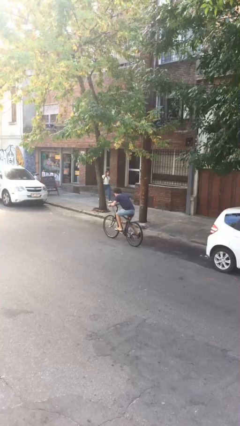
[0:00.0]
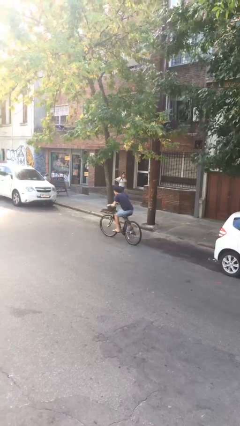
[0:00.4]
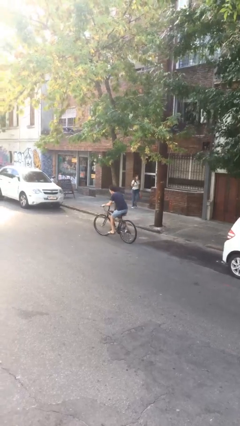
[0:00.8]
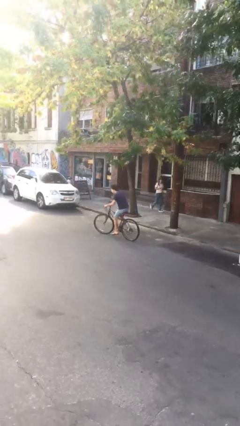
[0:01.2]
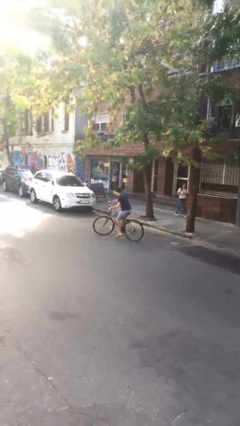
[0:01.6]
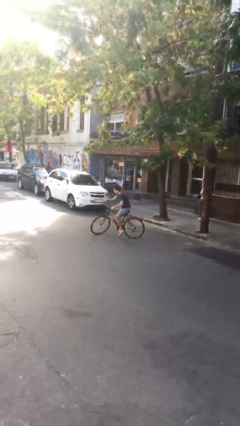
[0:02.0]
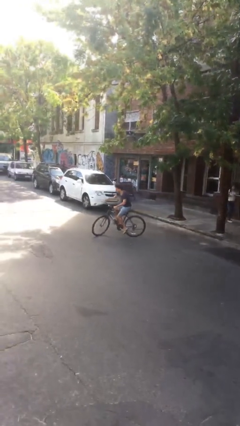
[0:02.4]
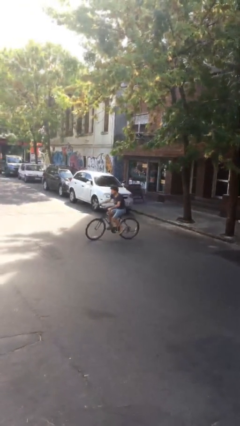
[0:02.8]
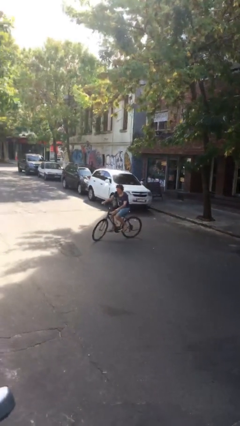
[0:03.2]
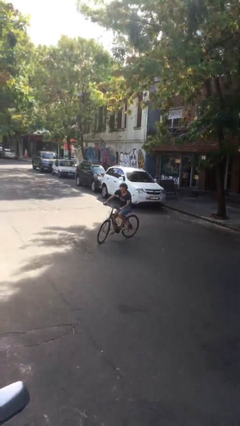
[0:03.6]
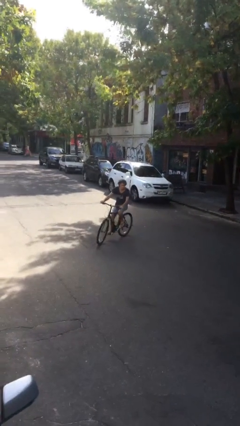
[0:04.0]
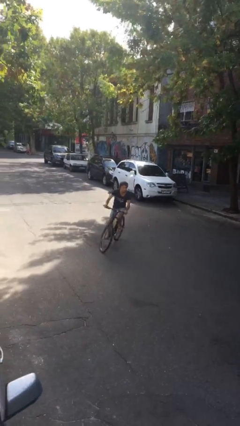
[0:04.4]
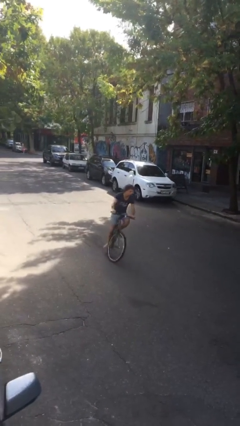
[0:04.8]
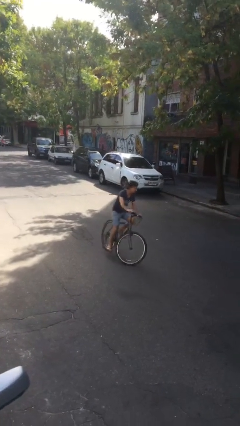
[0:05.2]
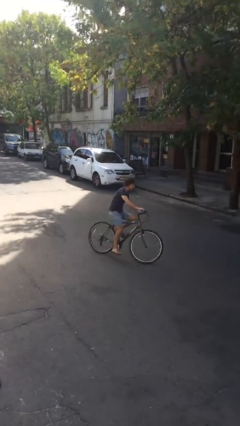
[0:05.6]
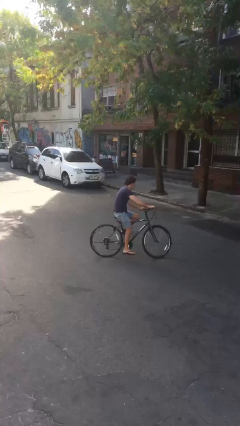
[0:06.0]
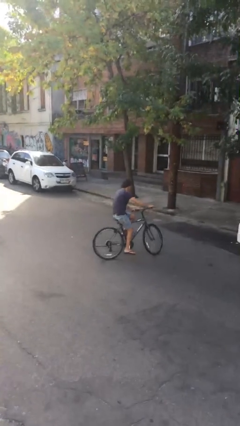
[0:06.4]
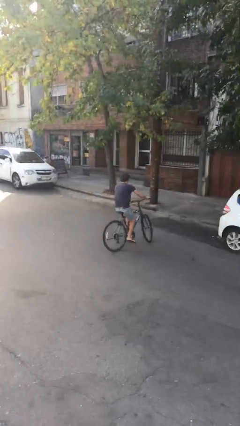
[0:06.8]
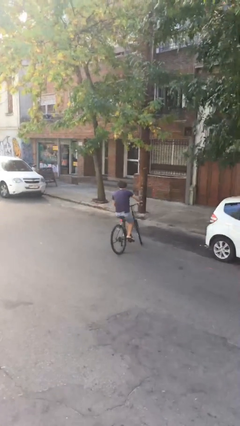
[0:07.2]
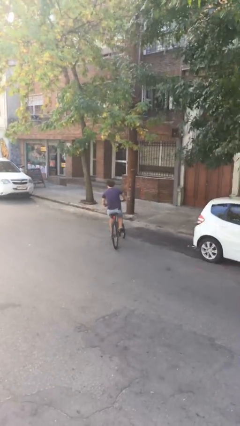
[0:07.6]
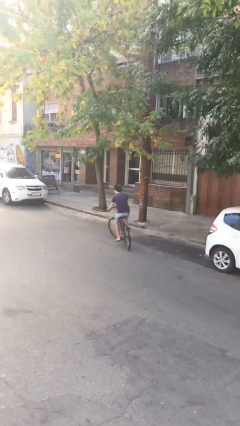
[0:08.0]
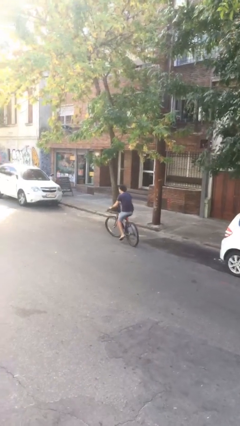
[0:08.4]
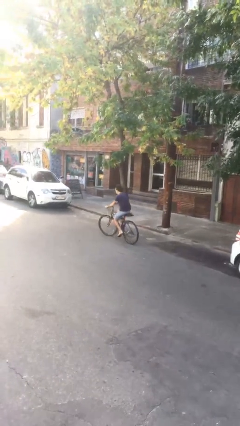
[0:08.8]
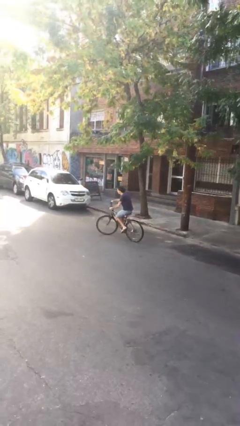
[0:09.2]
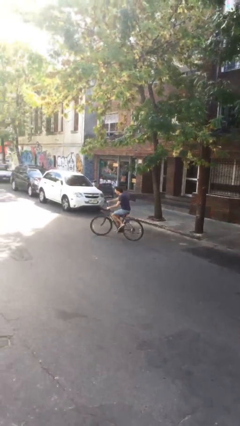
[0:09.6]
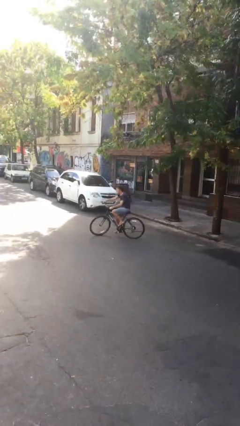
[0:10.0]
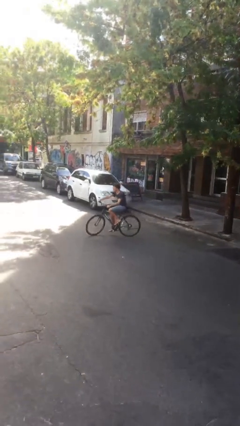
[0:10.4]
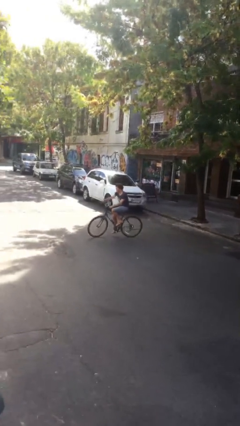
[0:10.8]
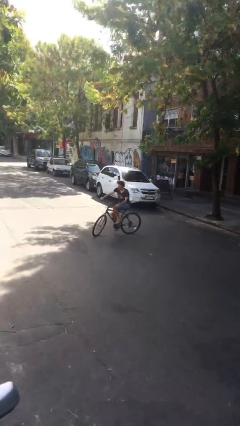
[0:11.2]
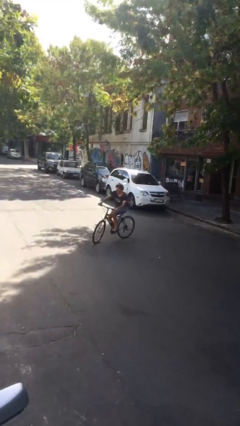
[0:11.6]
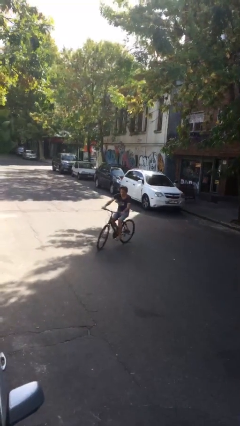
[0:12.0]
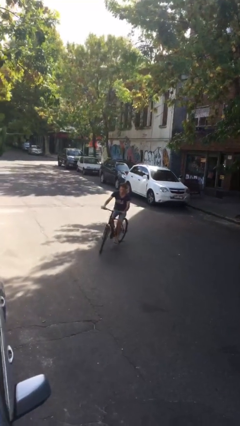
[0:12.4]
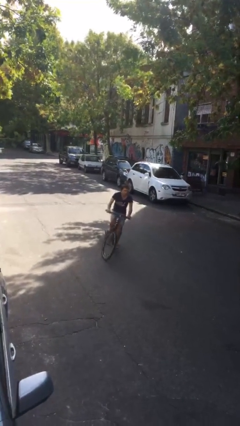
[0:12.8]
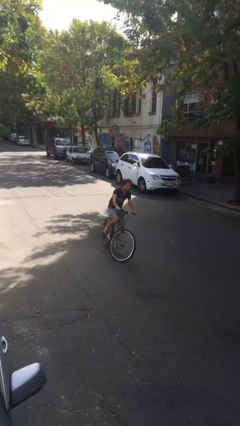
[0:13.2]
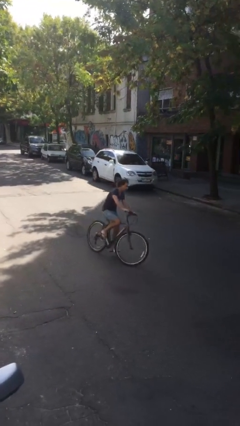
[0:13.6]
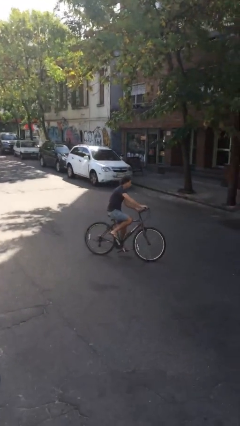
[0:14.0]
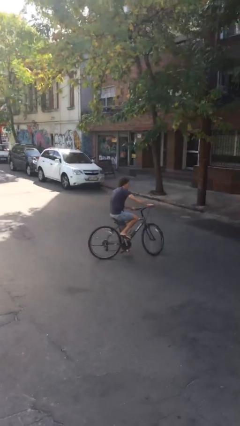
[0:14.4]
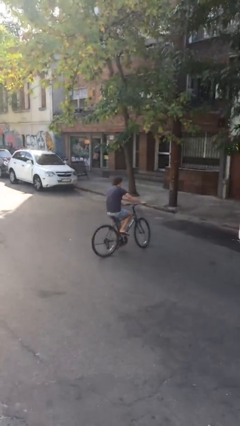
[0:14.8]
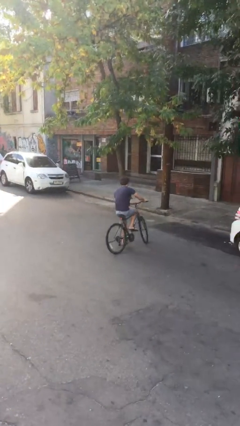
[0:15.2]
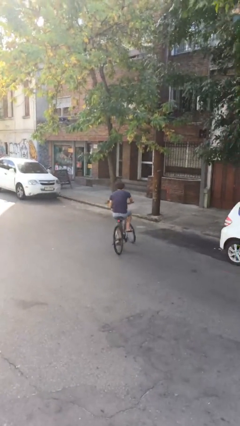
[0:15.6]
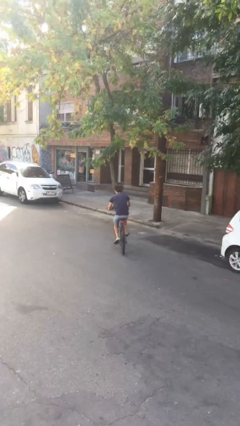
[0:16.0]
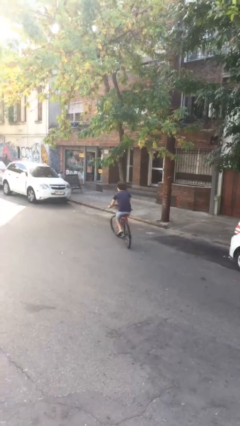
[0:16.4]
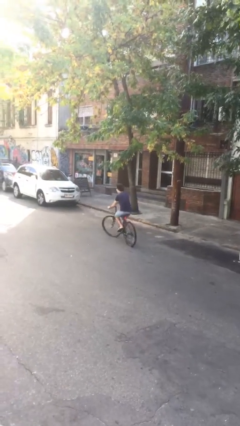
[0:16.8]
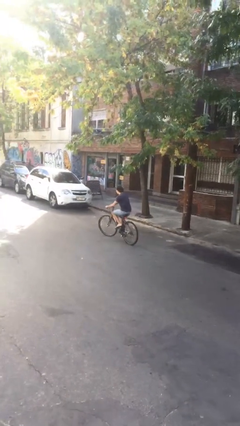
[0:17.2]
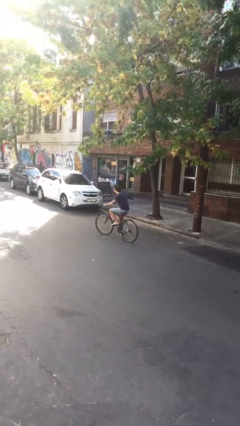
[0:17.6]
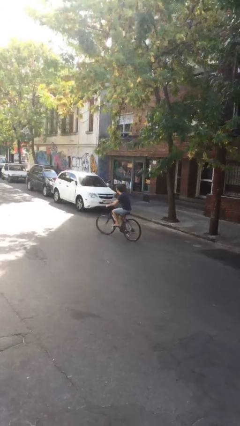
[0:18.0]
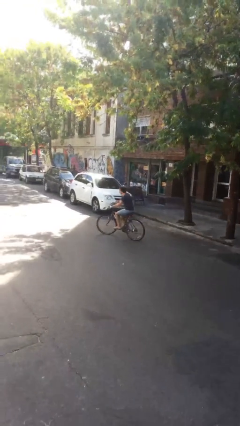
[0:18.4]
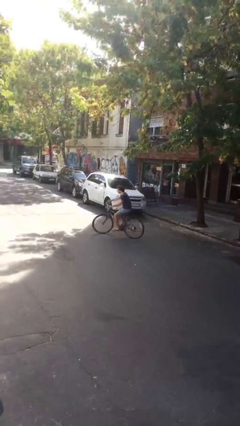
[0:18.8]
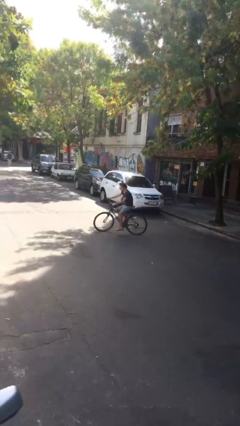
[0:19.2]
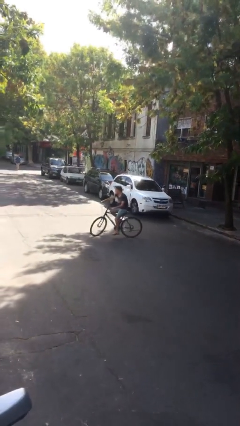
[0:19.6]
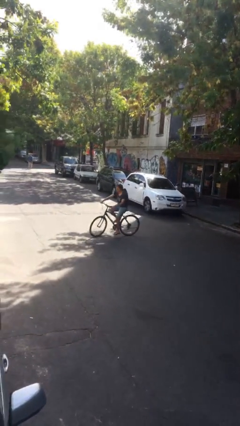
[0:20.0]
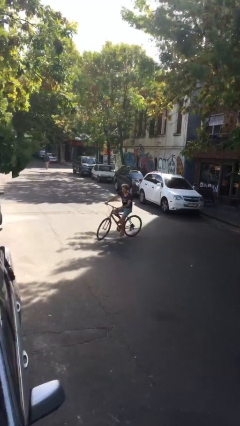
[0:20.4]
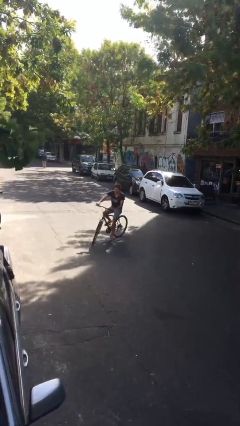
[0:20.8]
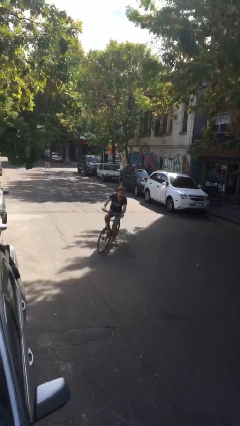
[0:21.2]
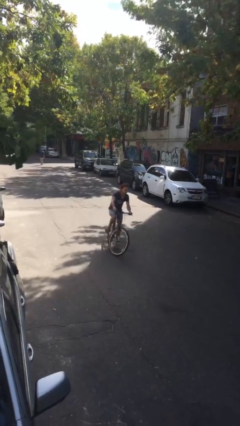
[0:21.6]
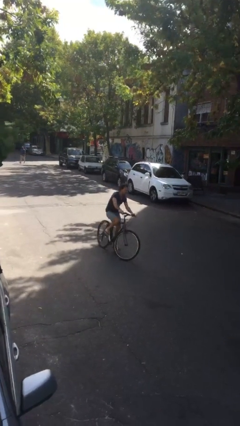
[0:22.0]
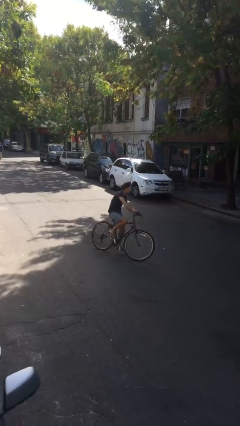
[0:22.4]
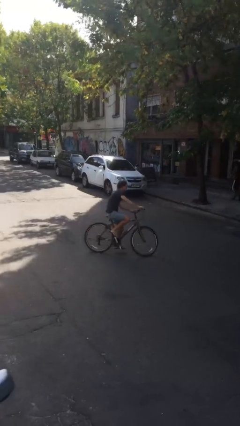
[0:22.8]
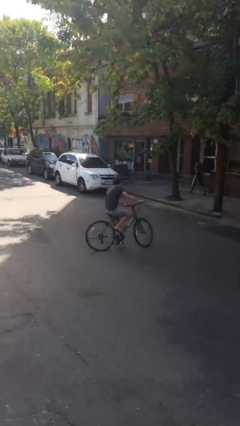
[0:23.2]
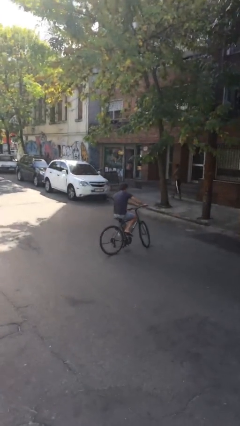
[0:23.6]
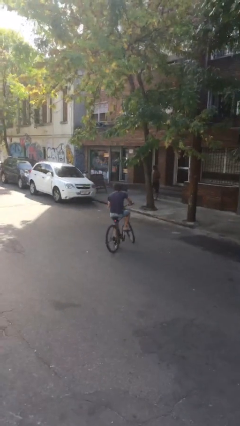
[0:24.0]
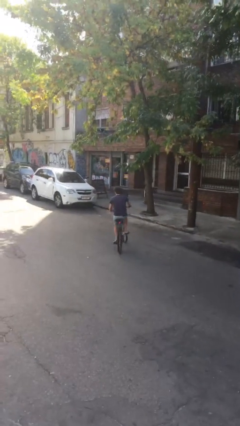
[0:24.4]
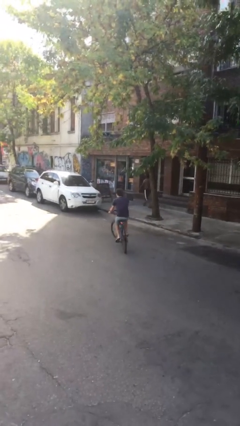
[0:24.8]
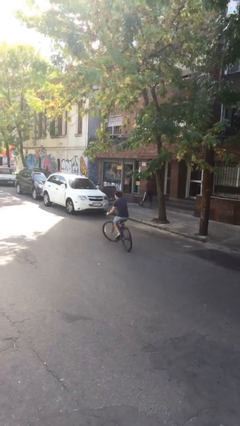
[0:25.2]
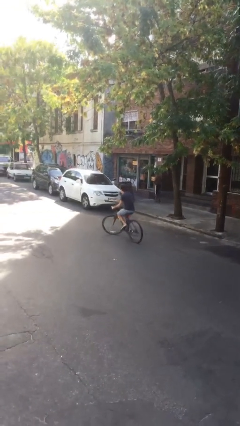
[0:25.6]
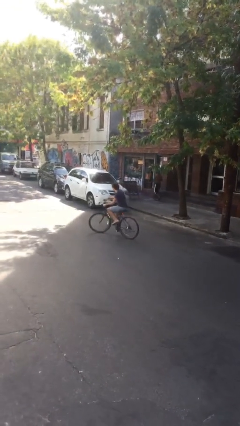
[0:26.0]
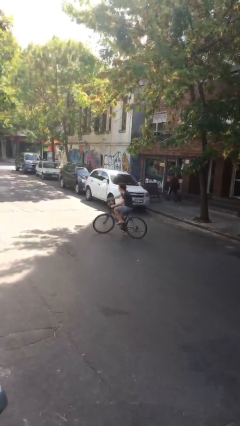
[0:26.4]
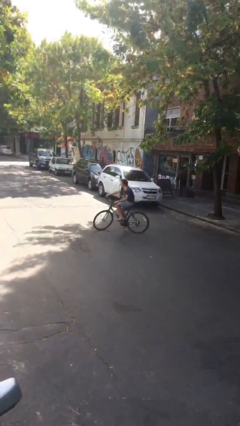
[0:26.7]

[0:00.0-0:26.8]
person rides bicycle

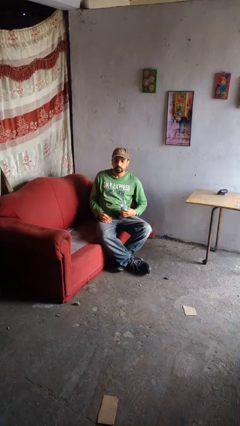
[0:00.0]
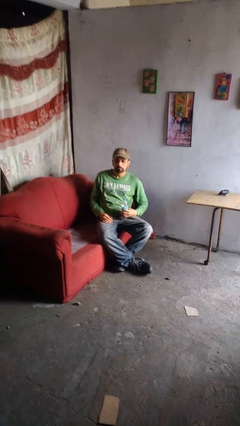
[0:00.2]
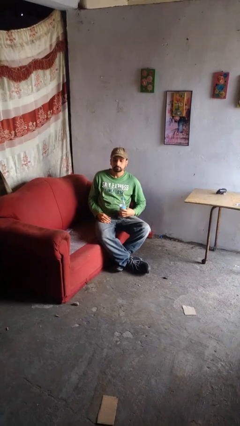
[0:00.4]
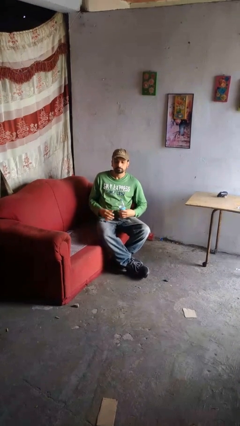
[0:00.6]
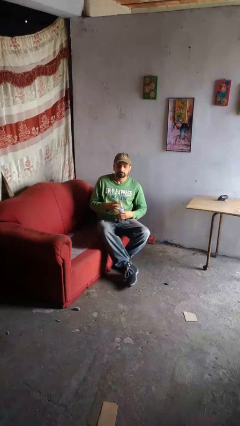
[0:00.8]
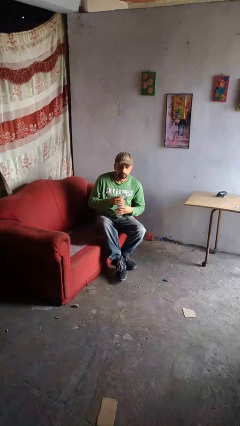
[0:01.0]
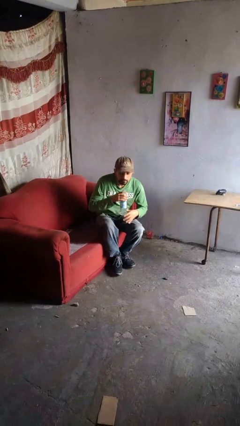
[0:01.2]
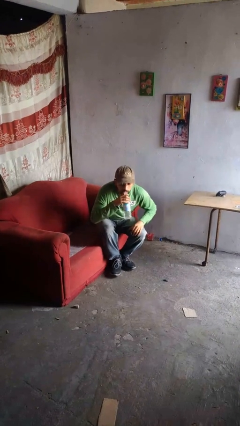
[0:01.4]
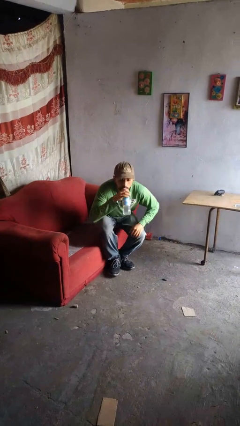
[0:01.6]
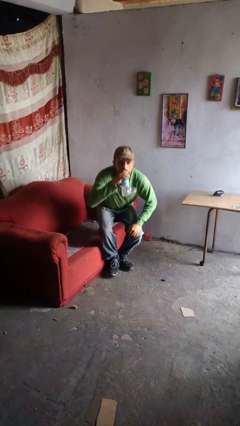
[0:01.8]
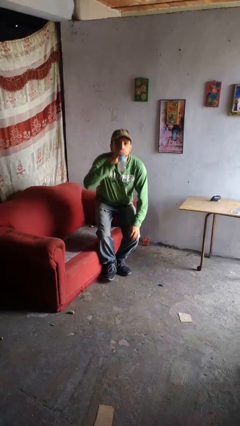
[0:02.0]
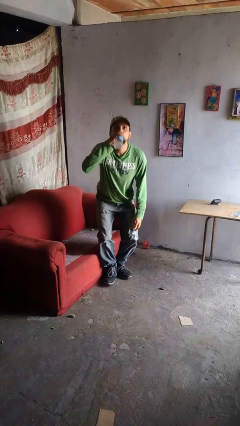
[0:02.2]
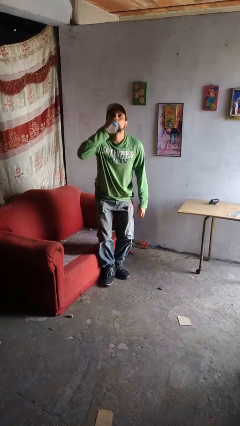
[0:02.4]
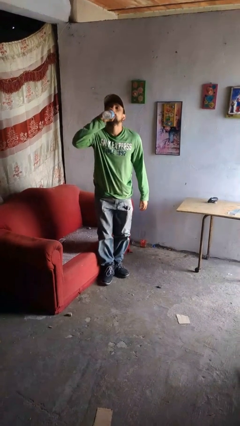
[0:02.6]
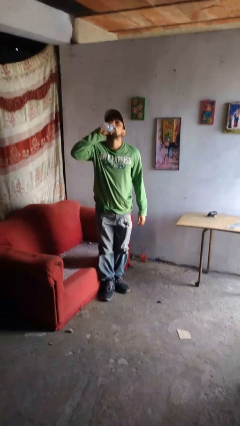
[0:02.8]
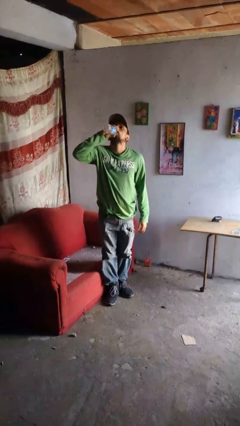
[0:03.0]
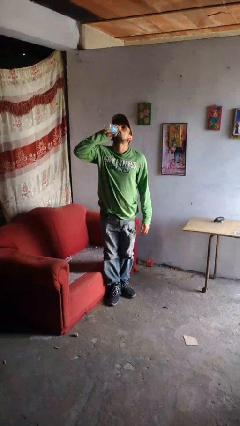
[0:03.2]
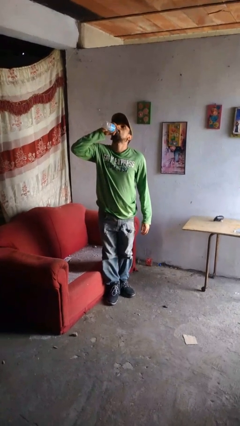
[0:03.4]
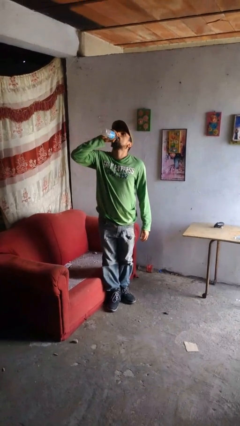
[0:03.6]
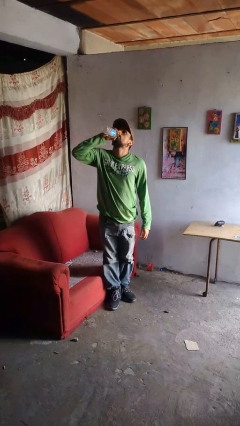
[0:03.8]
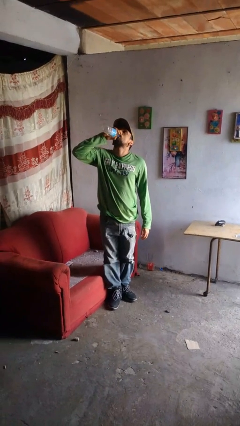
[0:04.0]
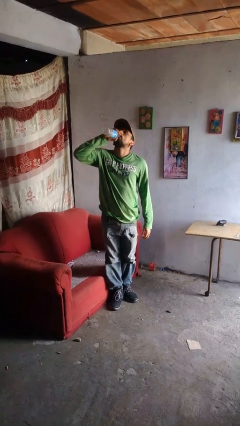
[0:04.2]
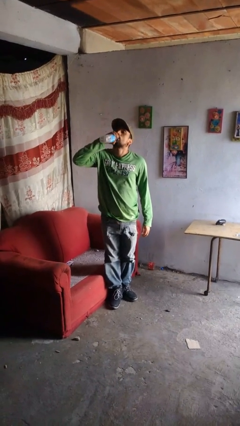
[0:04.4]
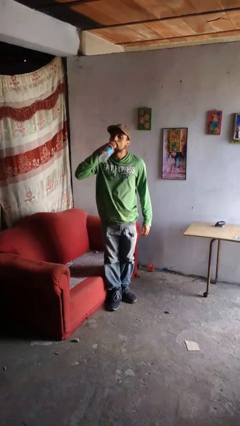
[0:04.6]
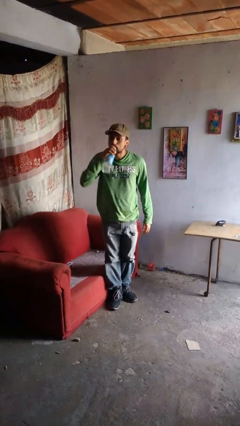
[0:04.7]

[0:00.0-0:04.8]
person drinks from bottle
